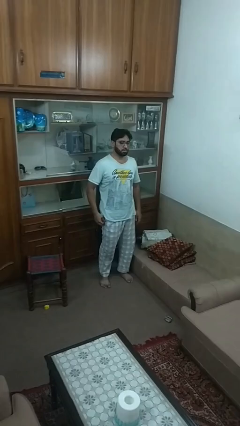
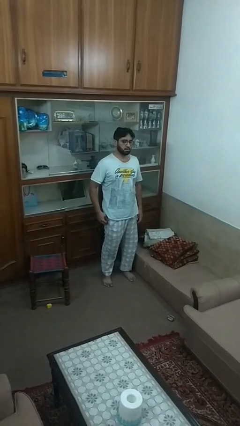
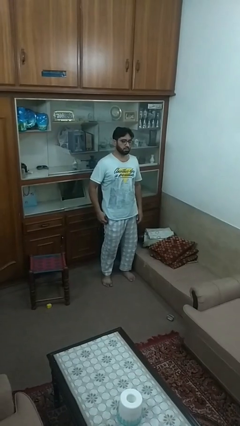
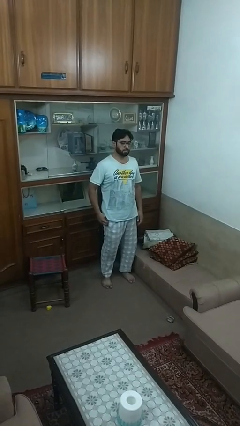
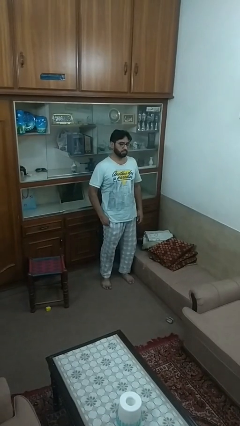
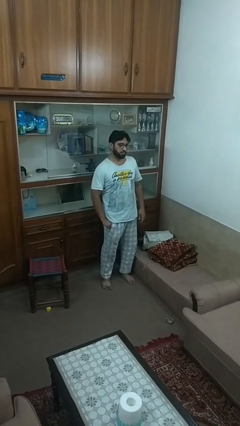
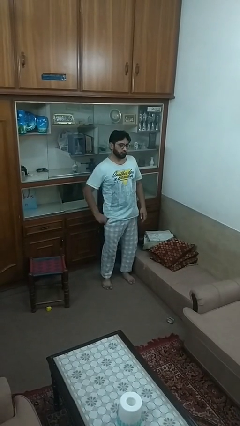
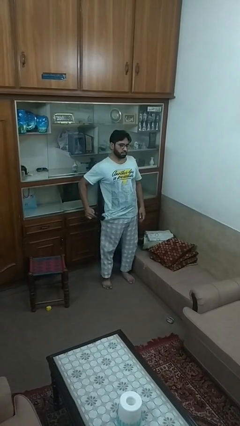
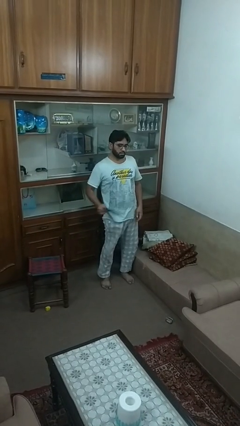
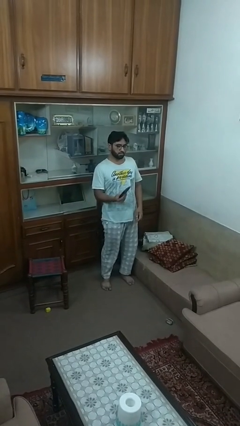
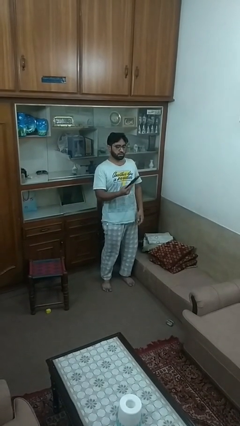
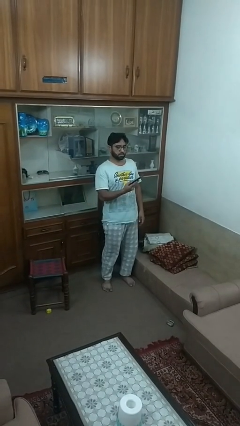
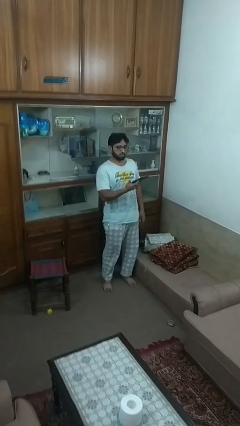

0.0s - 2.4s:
person takes phone from pocket

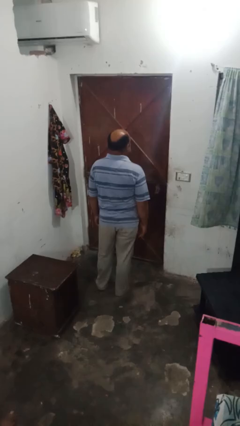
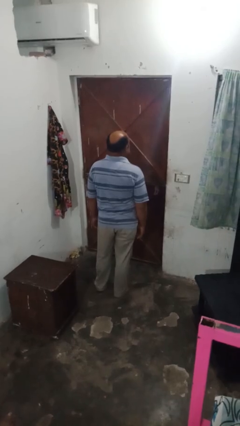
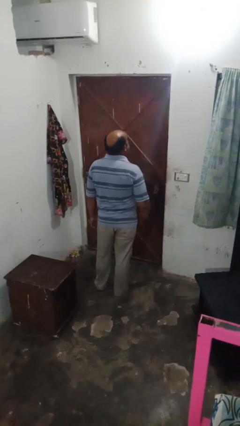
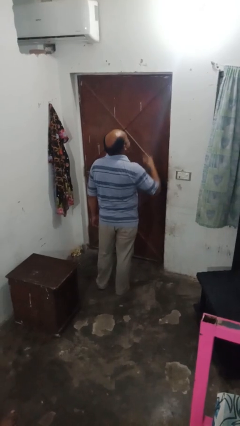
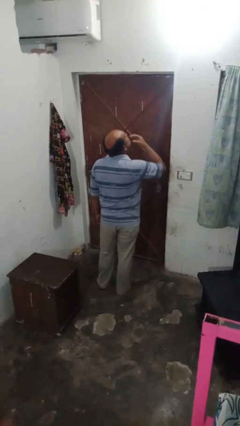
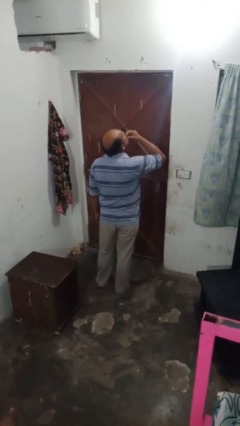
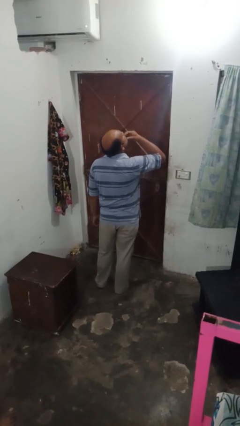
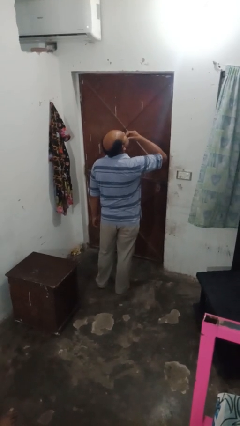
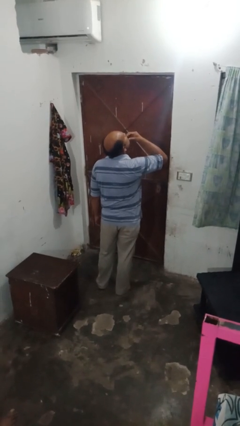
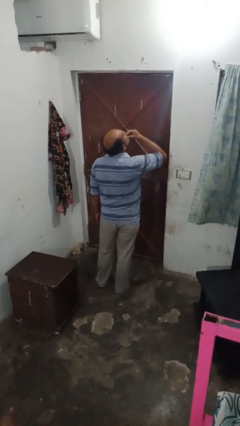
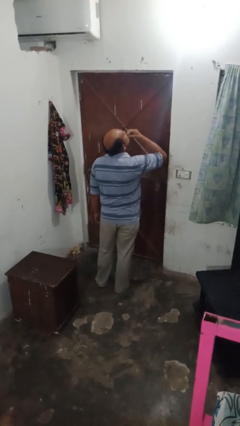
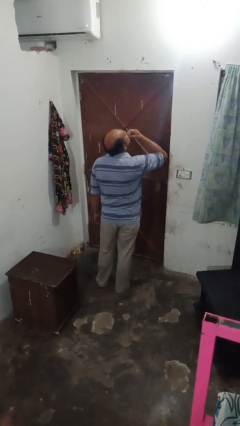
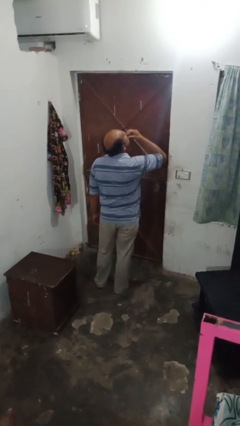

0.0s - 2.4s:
person strokes chin

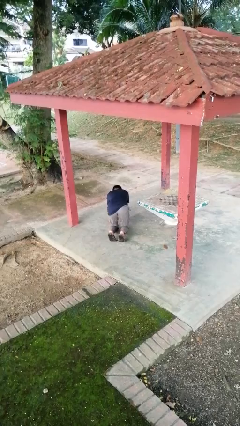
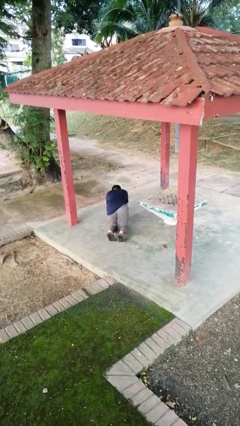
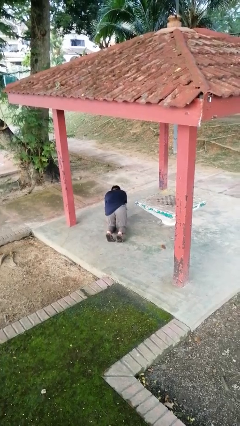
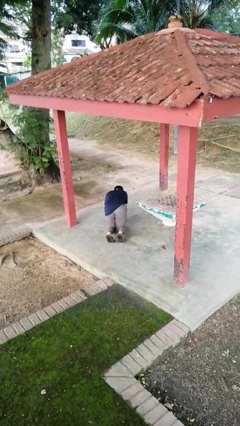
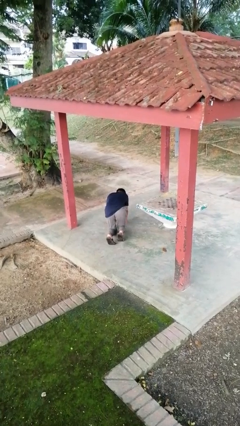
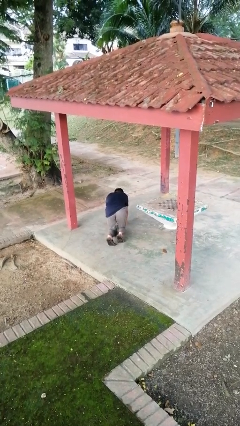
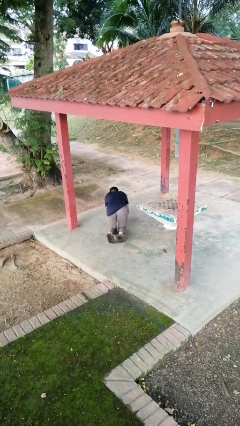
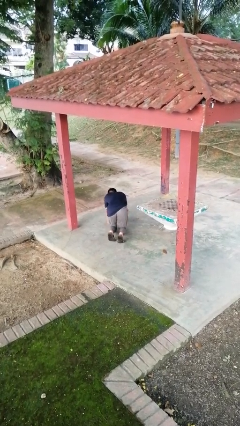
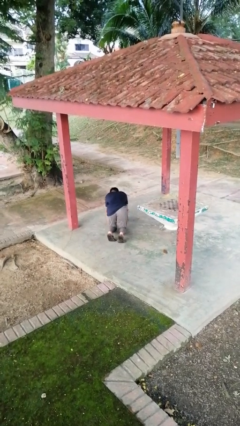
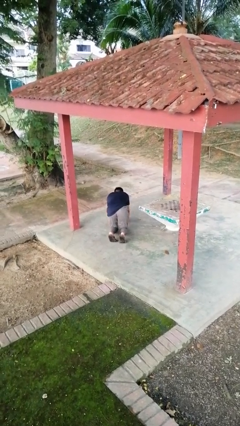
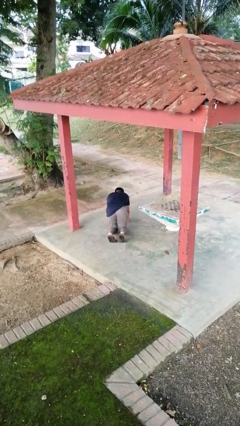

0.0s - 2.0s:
person crawls

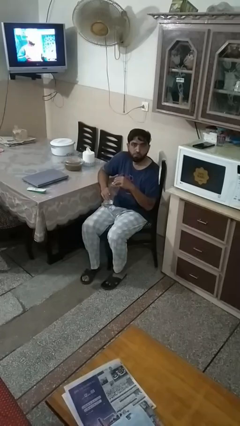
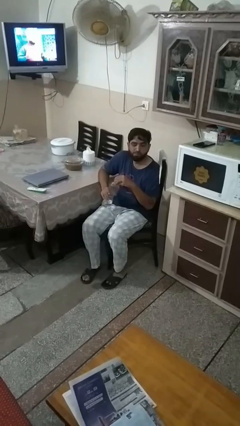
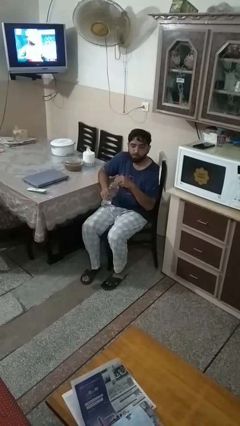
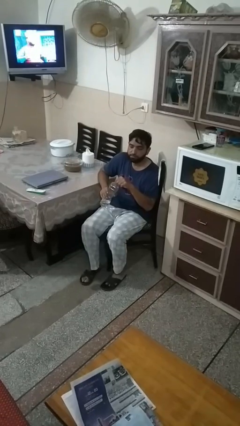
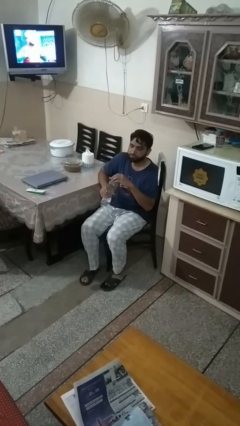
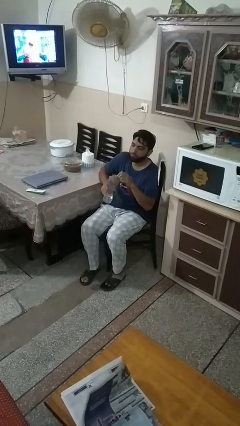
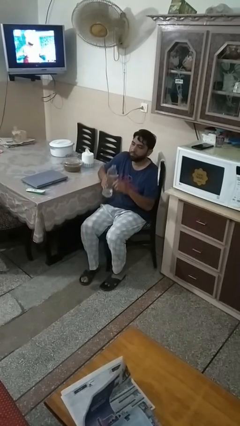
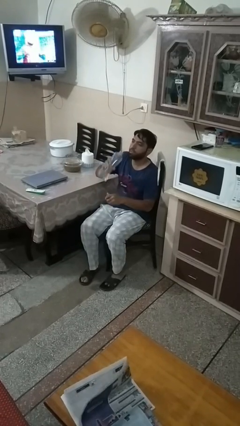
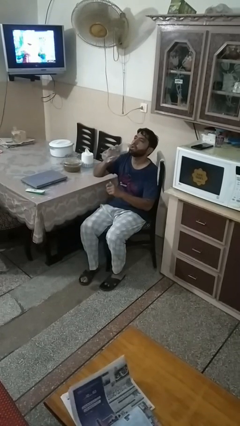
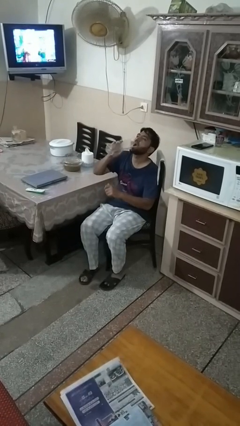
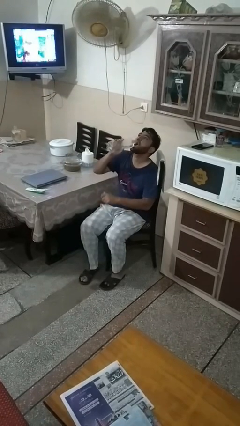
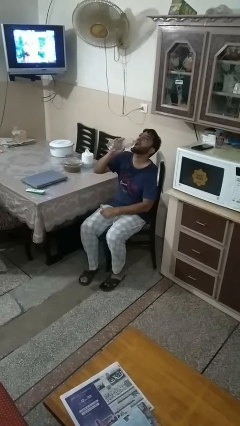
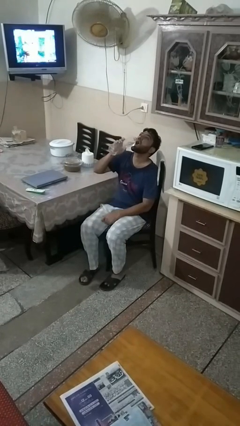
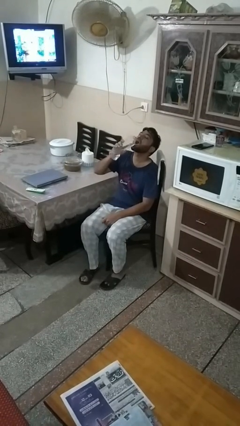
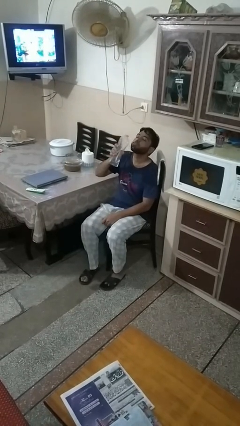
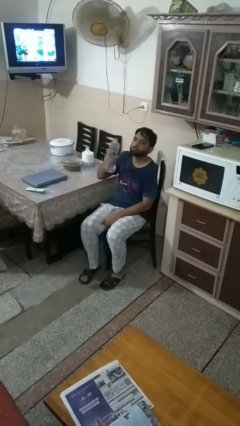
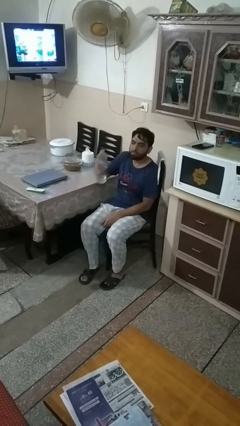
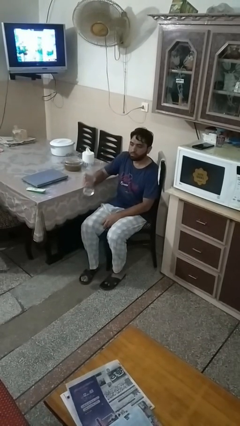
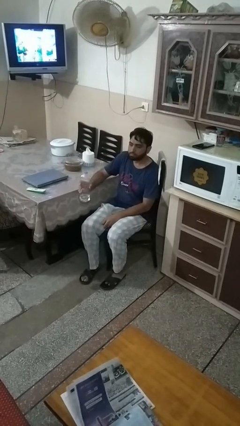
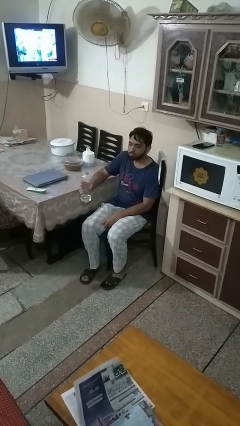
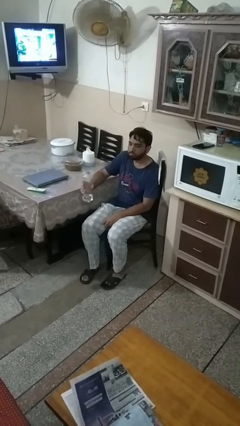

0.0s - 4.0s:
person drinks from bottle

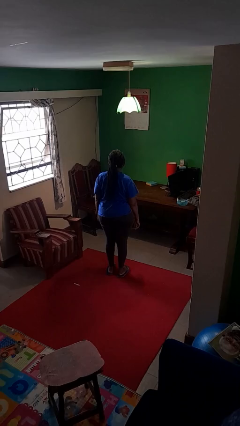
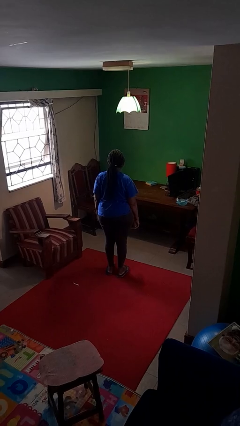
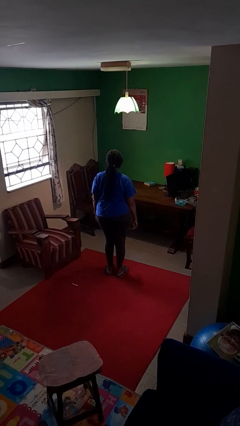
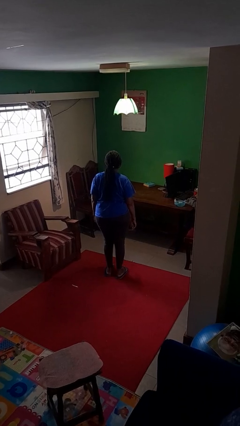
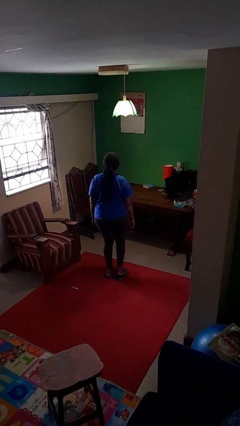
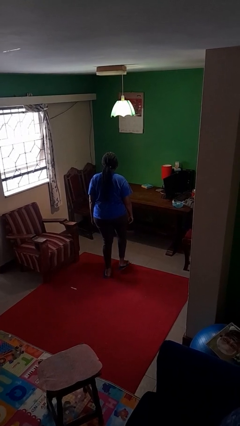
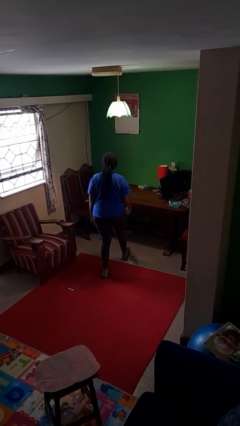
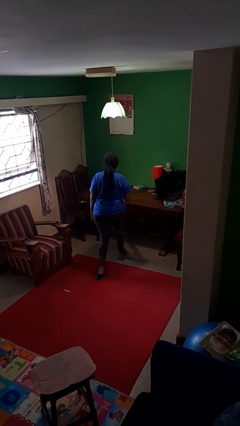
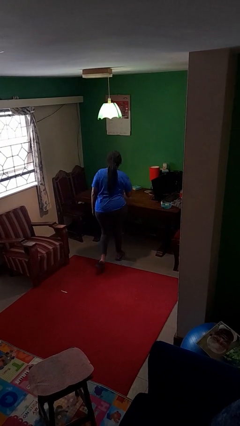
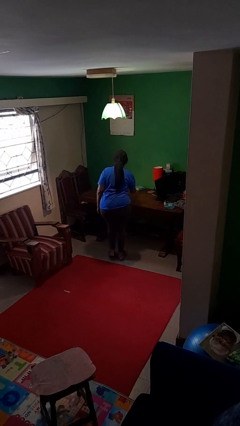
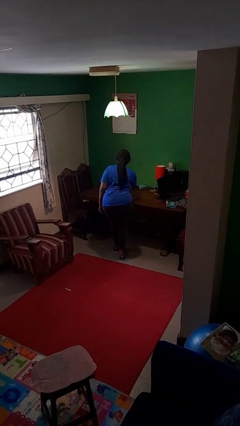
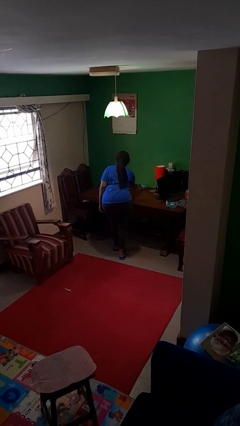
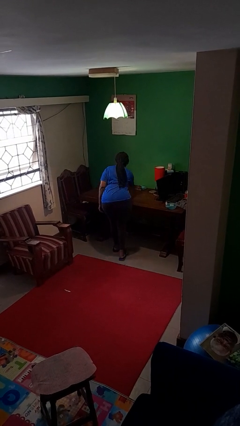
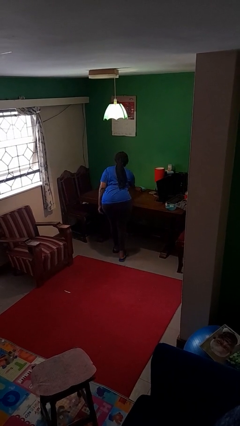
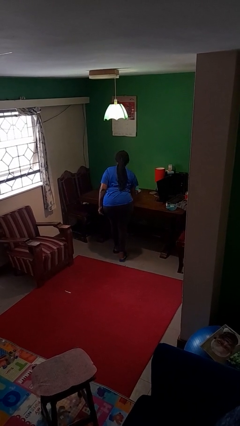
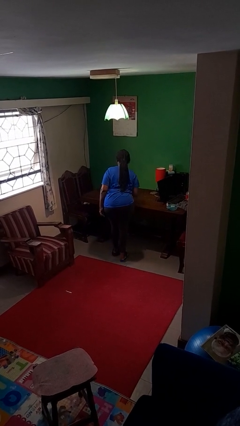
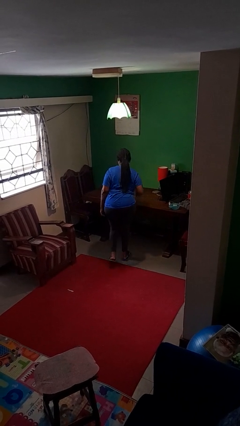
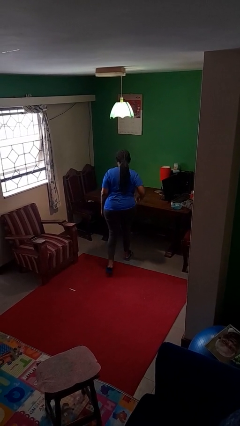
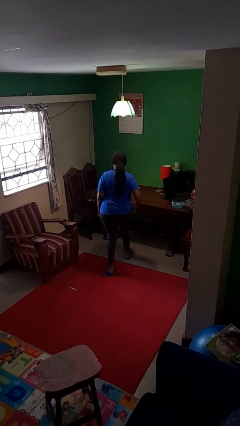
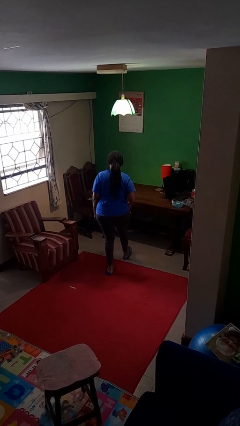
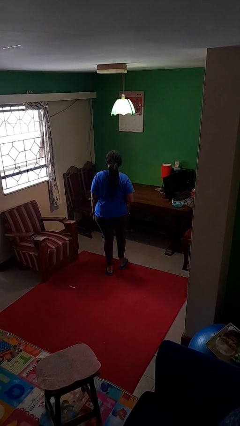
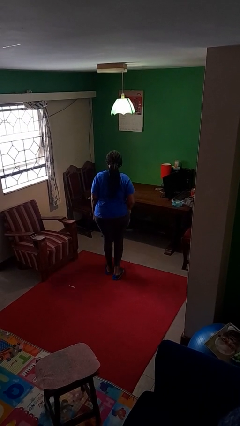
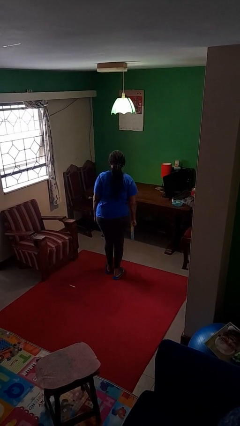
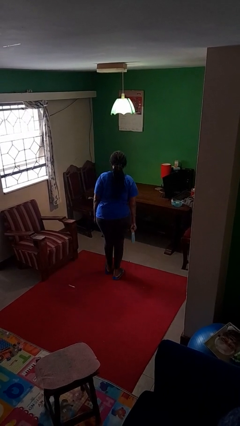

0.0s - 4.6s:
person picks up object from table

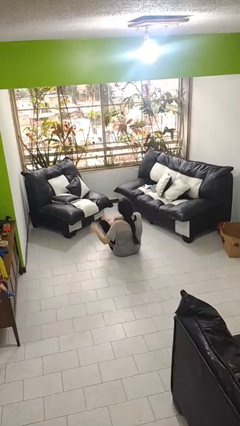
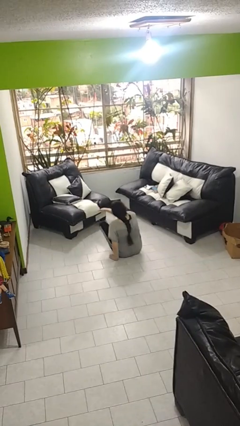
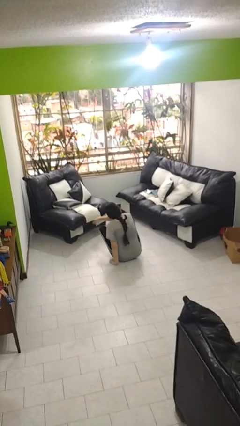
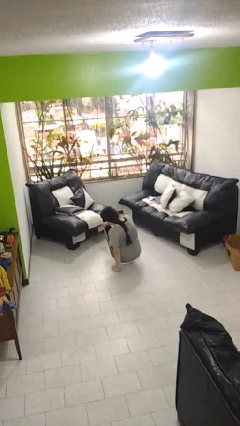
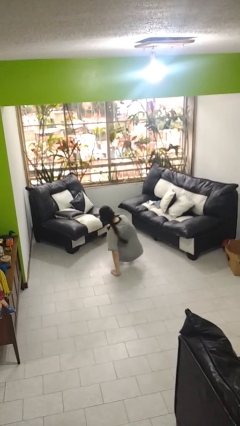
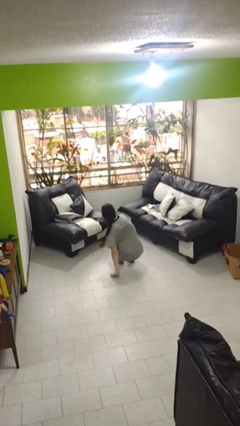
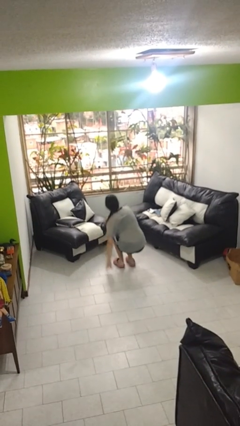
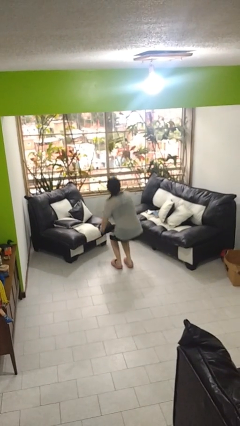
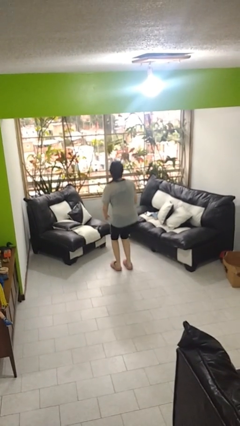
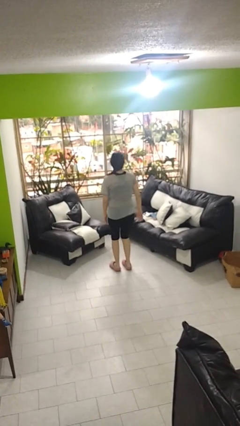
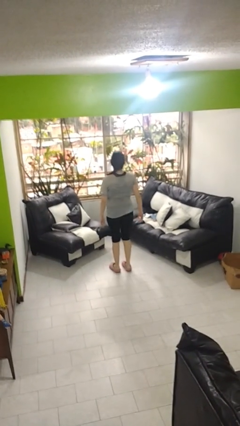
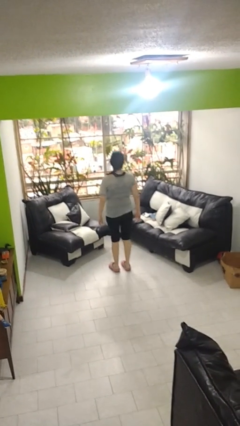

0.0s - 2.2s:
person stands up from floor
